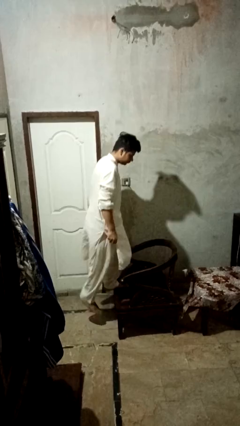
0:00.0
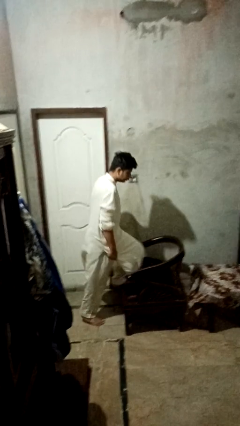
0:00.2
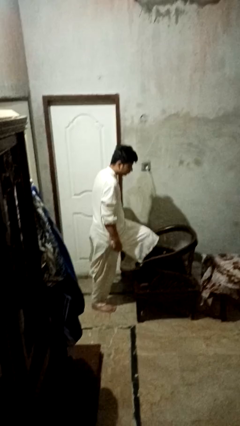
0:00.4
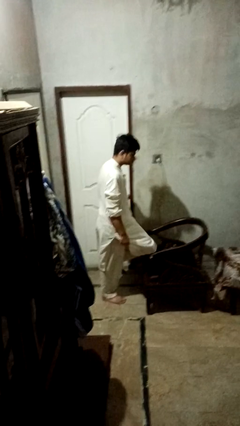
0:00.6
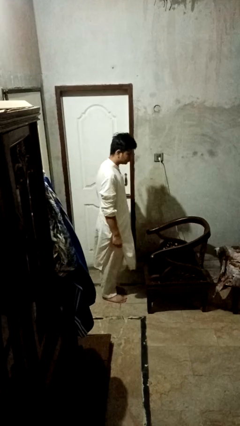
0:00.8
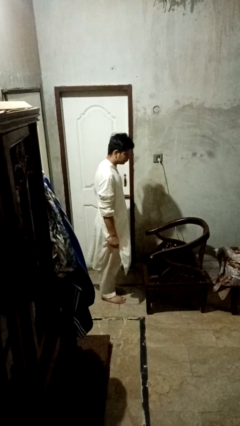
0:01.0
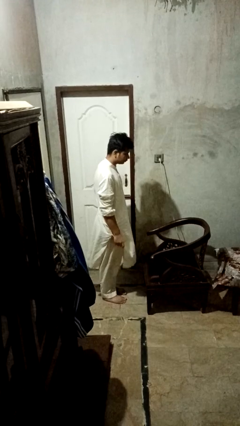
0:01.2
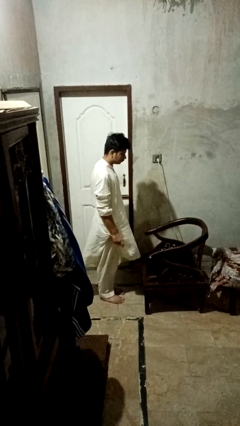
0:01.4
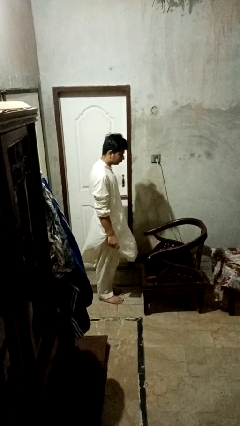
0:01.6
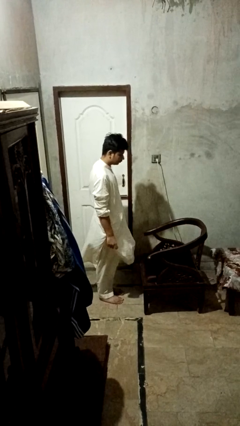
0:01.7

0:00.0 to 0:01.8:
person climbs off couch

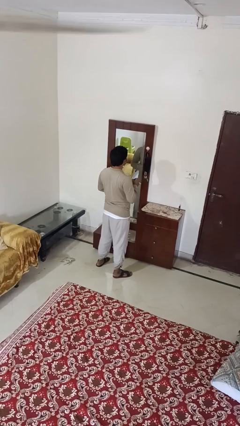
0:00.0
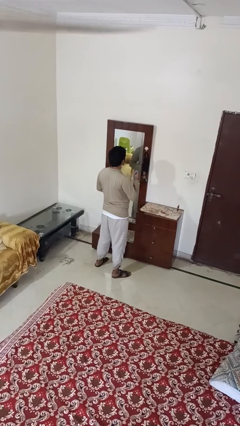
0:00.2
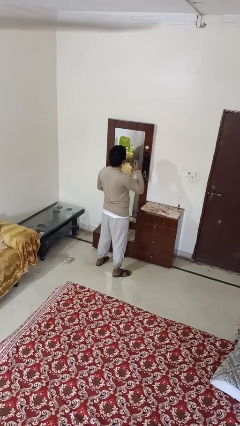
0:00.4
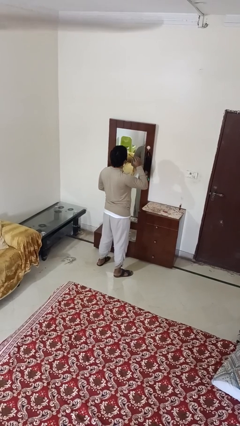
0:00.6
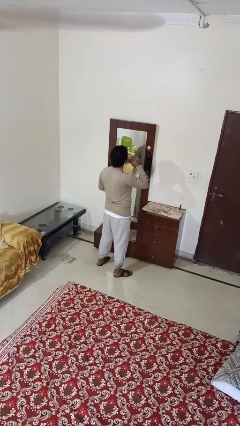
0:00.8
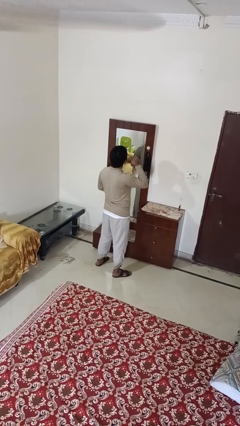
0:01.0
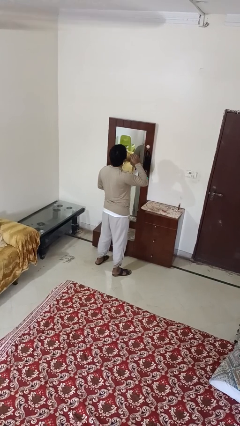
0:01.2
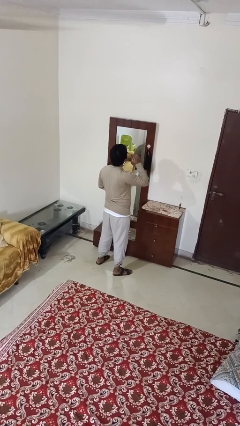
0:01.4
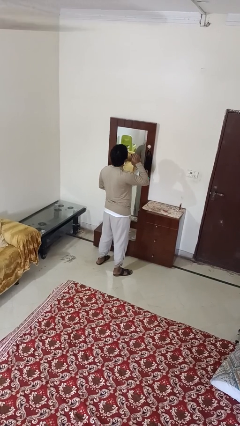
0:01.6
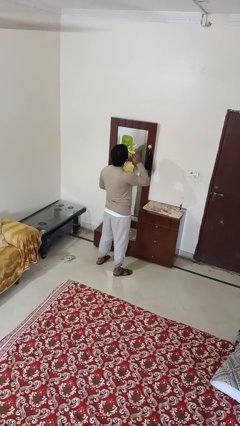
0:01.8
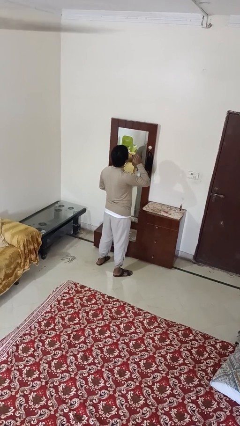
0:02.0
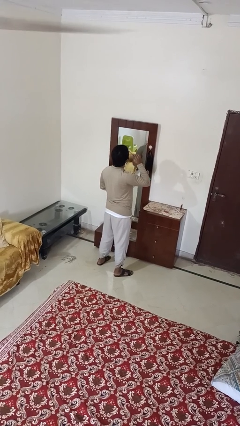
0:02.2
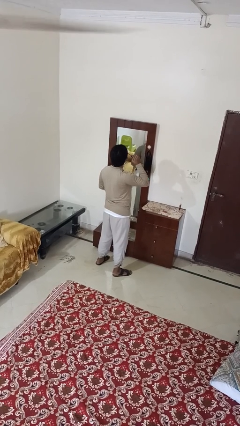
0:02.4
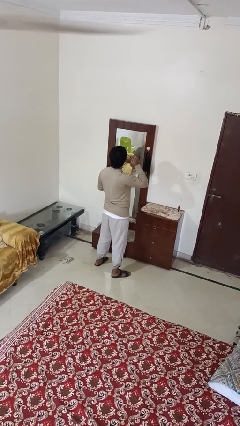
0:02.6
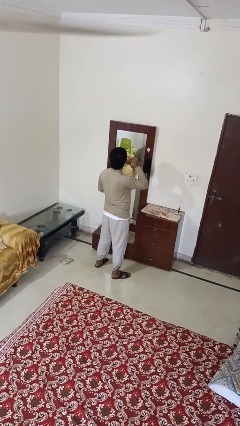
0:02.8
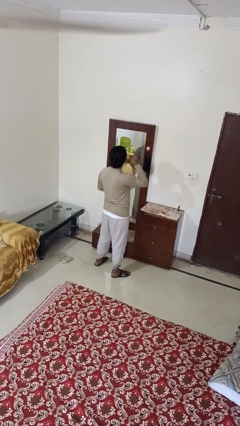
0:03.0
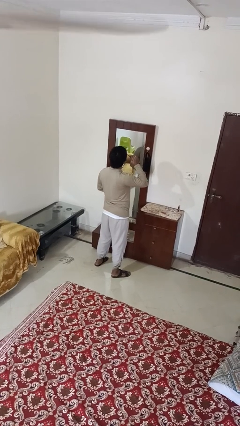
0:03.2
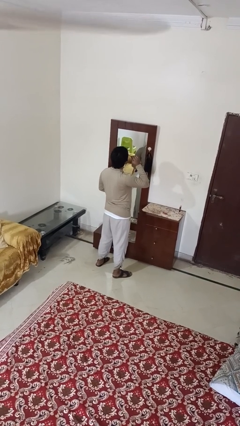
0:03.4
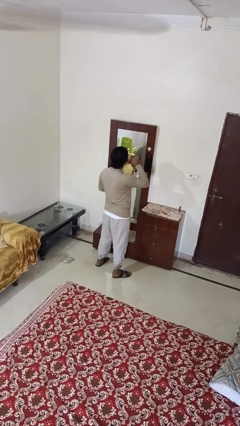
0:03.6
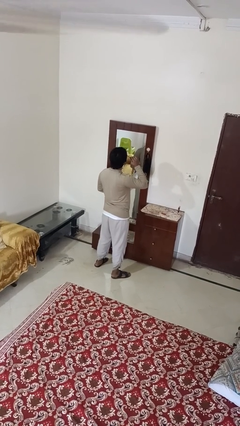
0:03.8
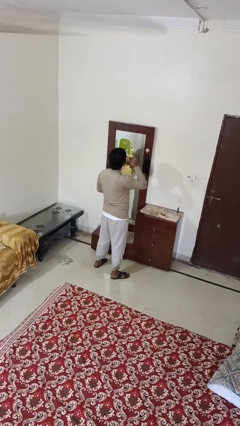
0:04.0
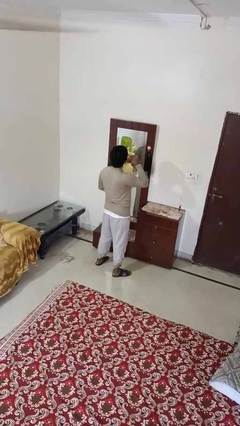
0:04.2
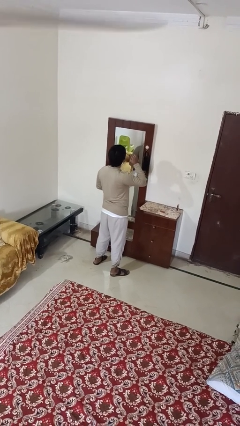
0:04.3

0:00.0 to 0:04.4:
person applies eye makeup

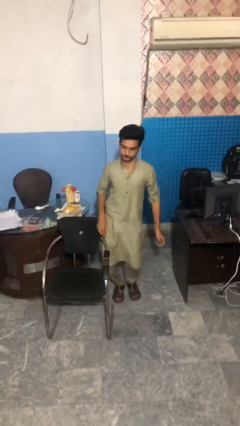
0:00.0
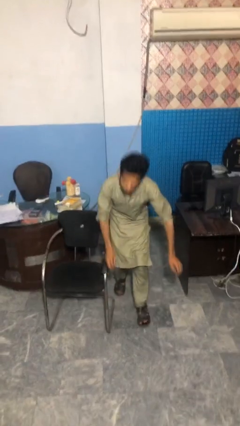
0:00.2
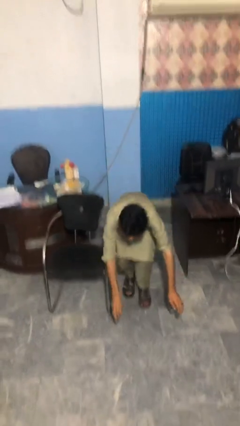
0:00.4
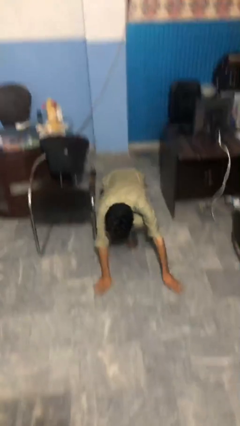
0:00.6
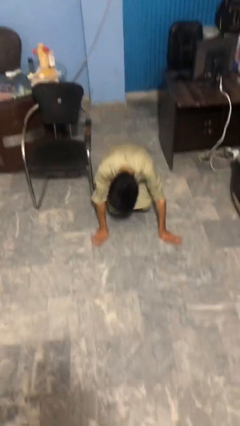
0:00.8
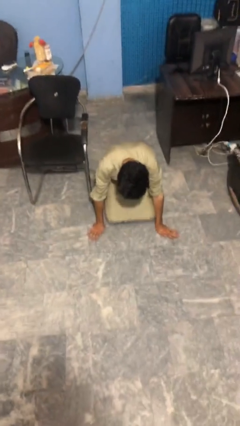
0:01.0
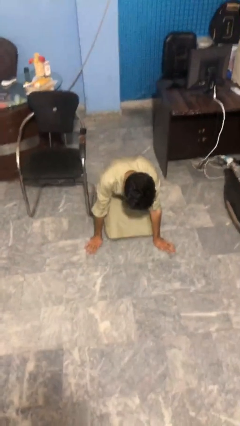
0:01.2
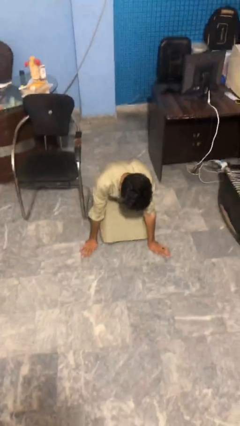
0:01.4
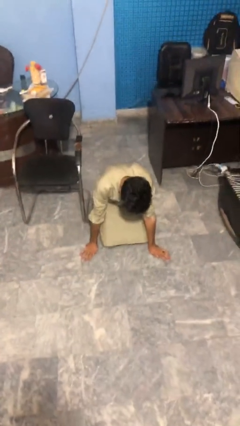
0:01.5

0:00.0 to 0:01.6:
person trips on object on floor

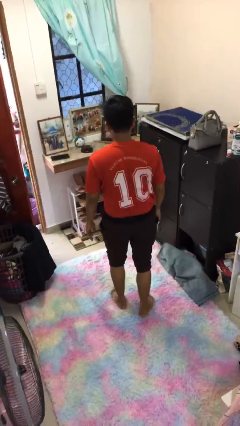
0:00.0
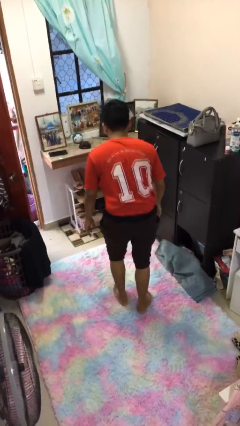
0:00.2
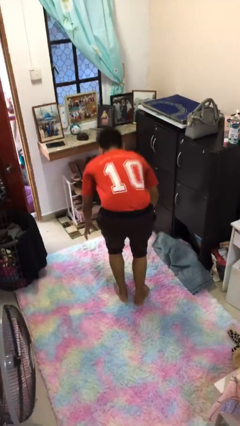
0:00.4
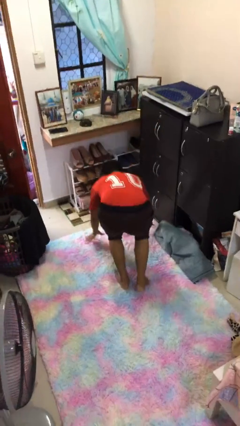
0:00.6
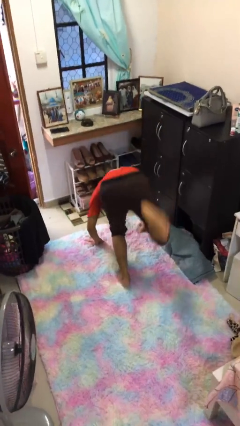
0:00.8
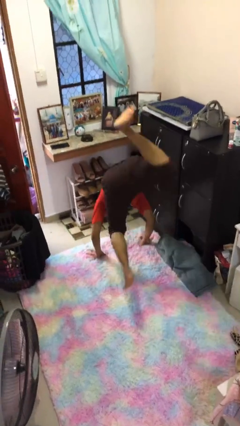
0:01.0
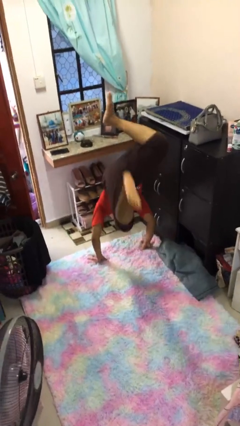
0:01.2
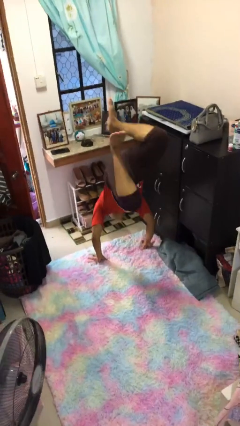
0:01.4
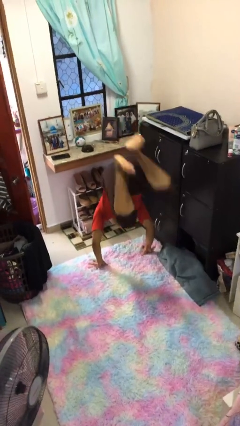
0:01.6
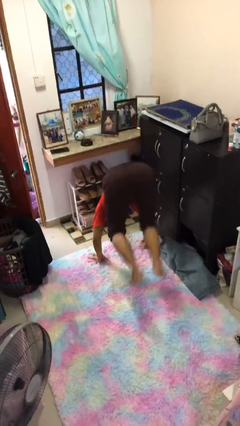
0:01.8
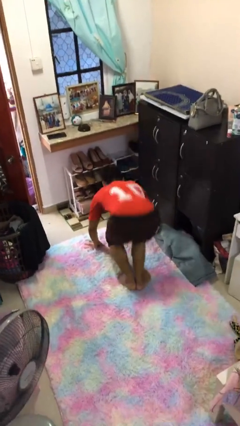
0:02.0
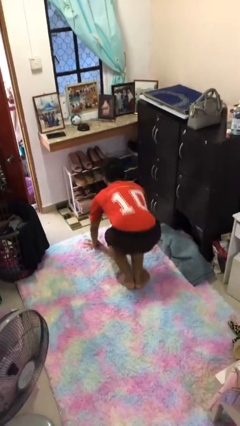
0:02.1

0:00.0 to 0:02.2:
person handstand

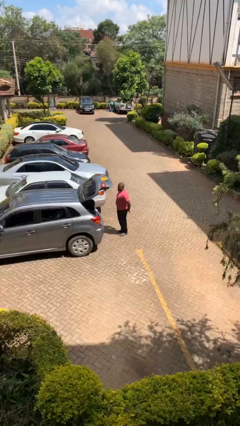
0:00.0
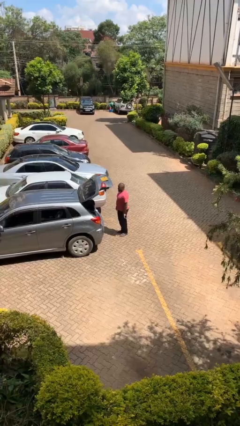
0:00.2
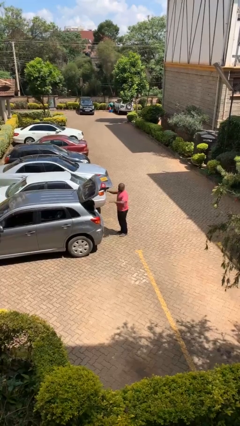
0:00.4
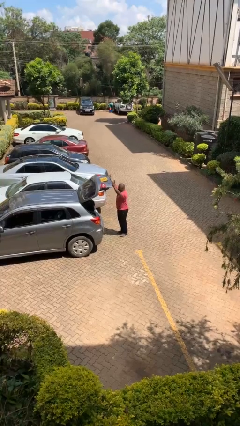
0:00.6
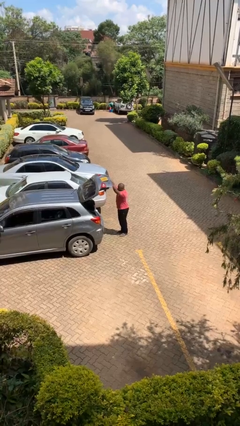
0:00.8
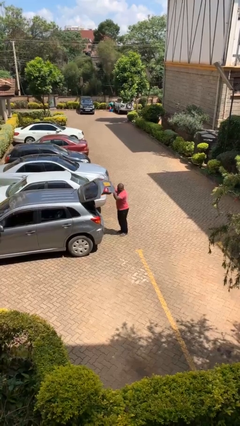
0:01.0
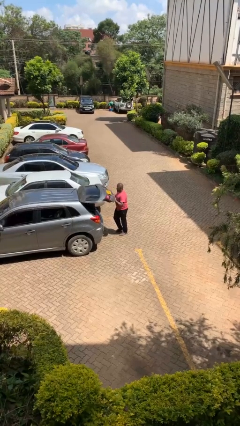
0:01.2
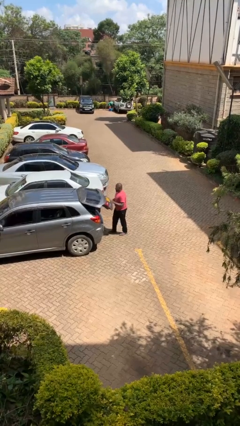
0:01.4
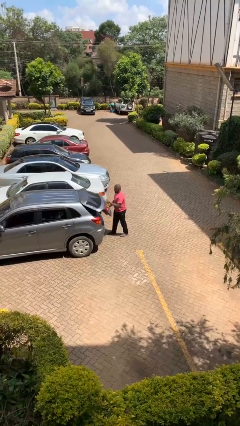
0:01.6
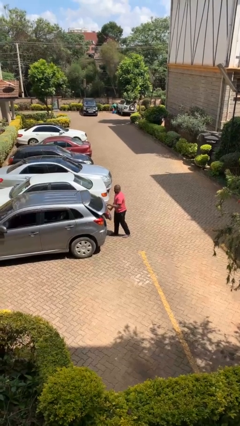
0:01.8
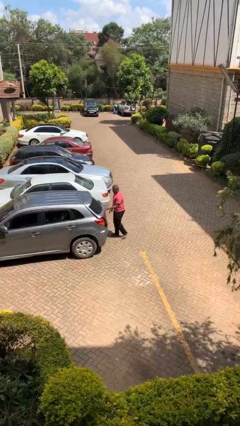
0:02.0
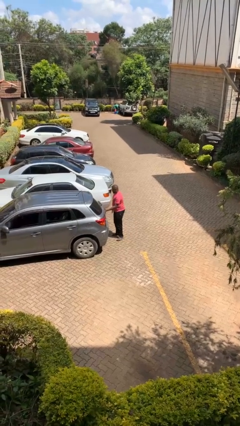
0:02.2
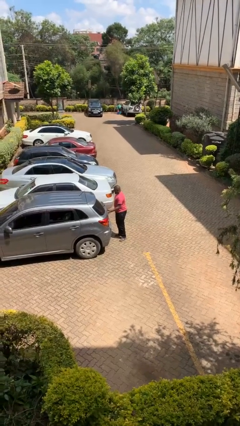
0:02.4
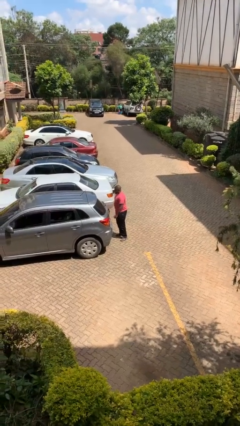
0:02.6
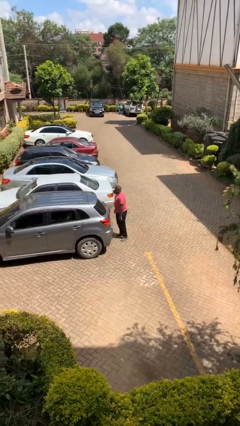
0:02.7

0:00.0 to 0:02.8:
person closes car trunk

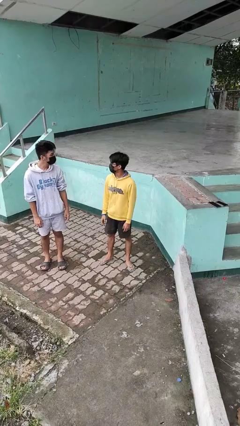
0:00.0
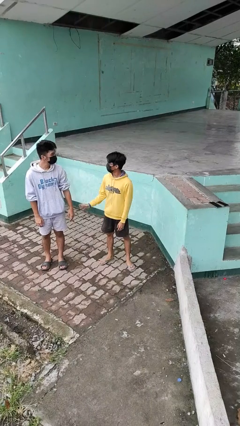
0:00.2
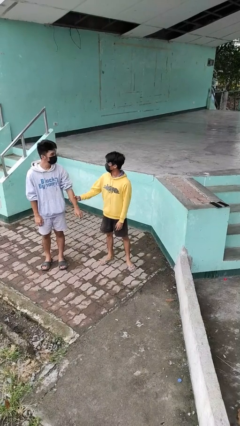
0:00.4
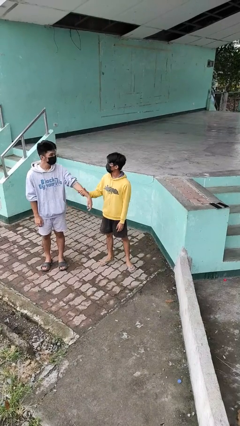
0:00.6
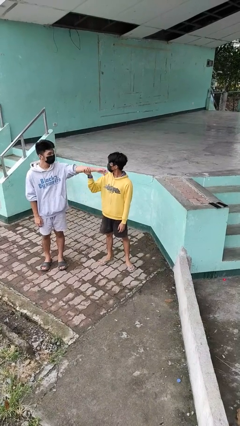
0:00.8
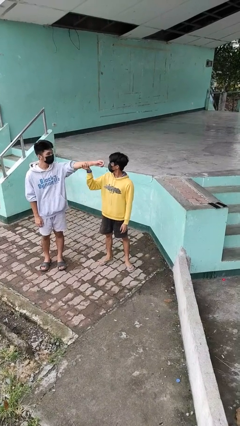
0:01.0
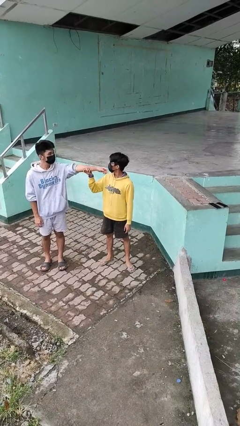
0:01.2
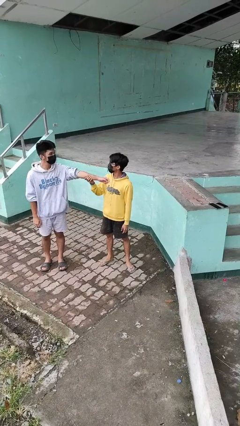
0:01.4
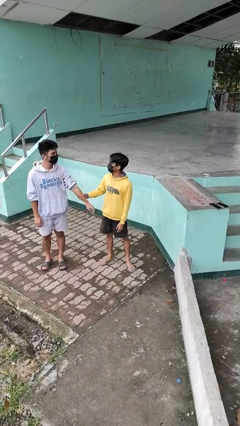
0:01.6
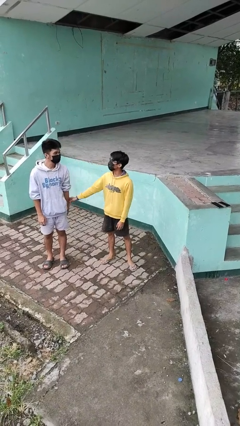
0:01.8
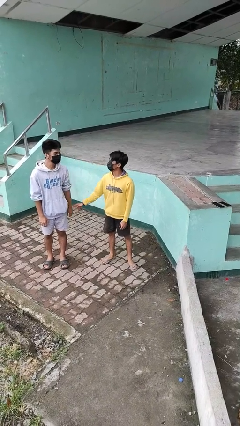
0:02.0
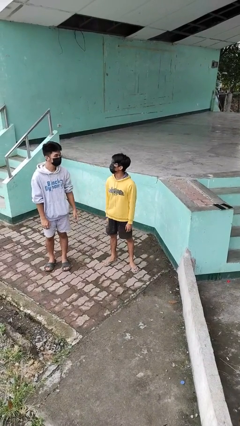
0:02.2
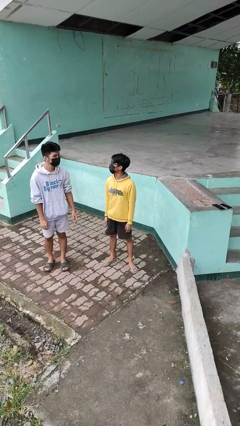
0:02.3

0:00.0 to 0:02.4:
person grabs person by forearm

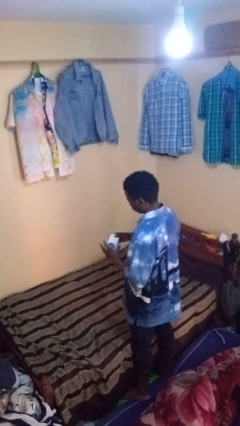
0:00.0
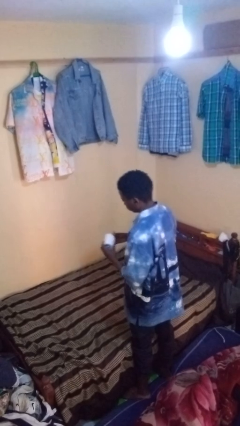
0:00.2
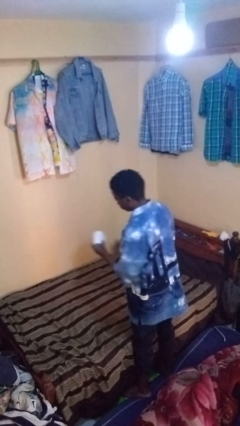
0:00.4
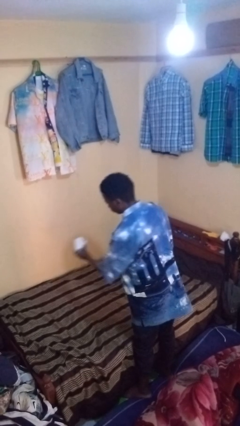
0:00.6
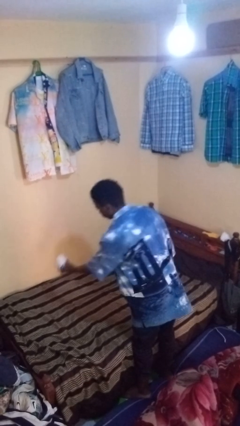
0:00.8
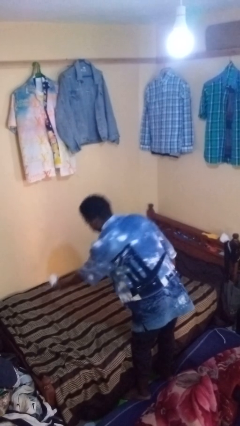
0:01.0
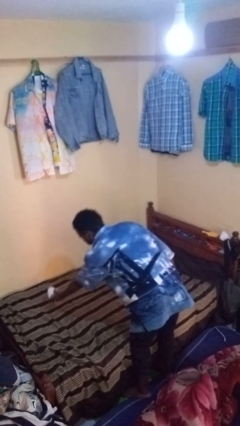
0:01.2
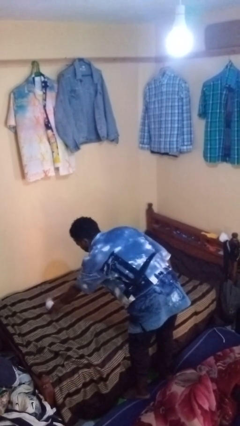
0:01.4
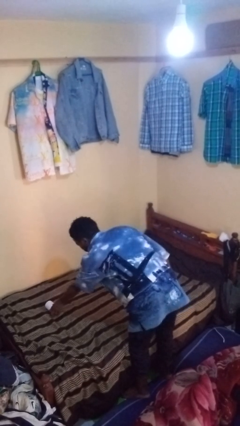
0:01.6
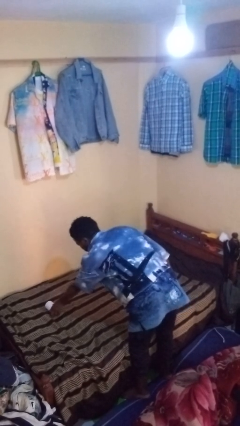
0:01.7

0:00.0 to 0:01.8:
person puts down object on bed
